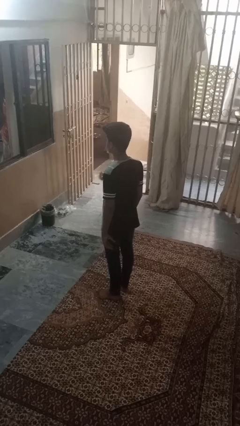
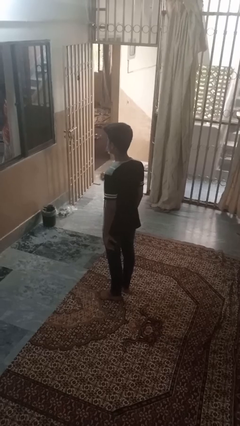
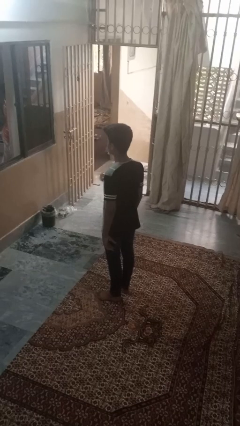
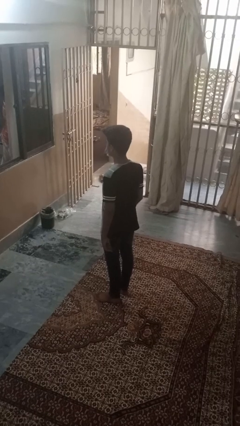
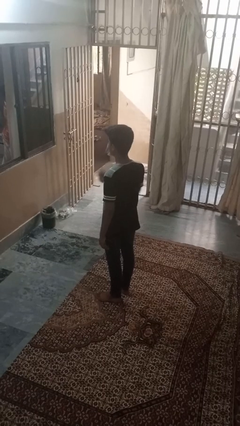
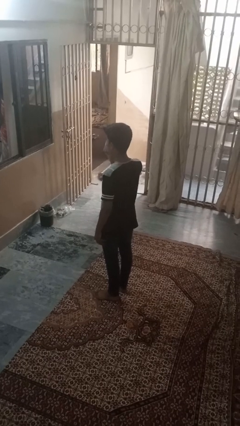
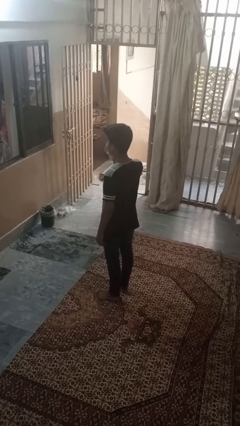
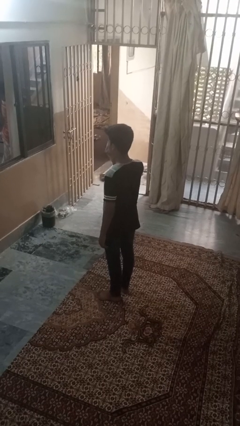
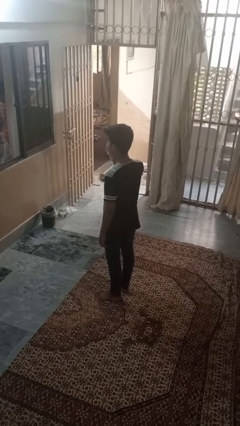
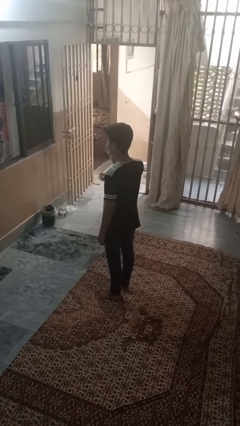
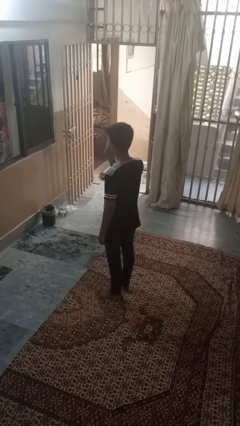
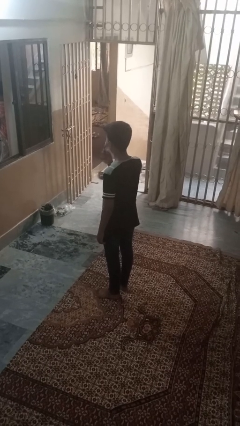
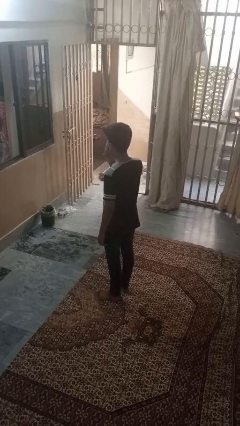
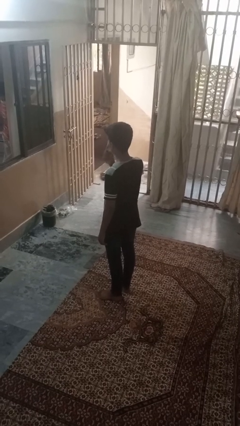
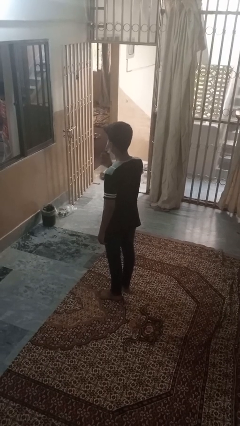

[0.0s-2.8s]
person shades eyes

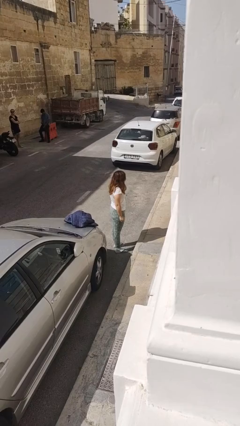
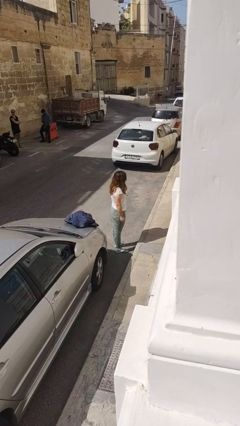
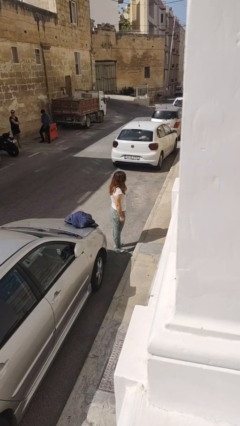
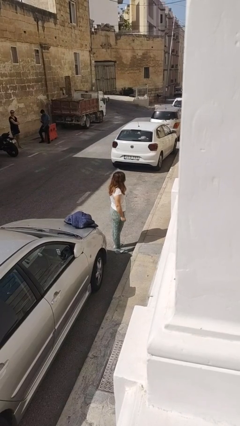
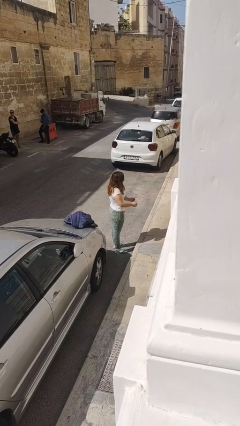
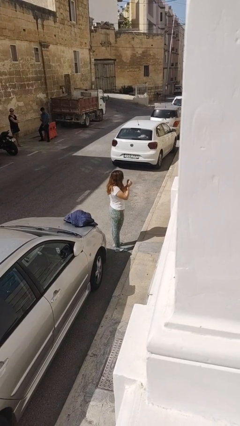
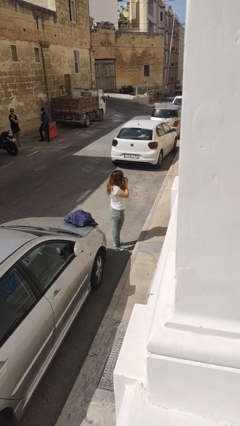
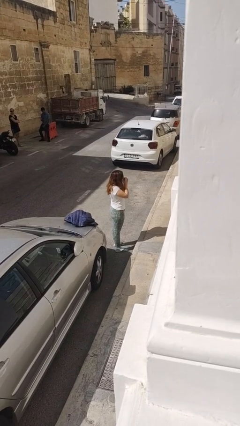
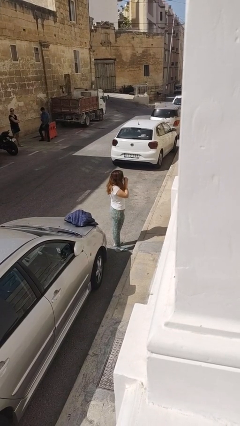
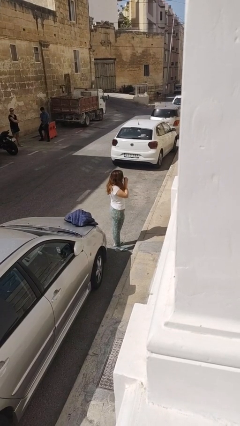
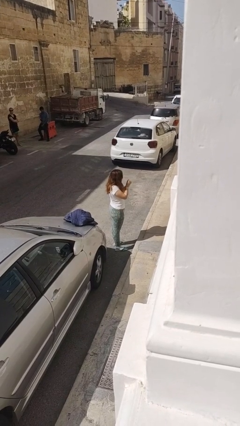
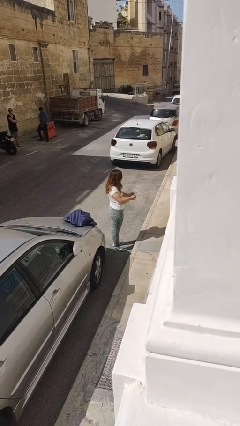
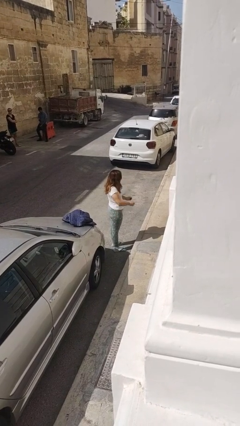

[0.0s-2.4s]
person blows into hands

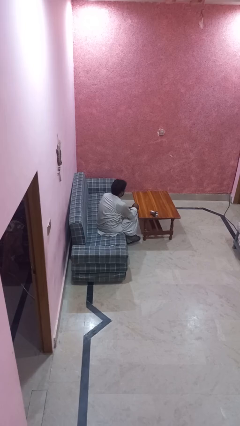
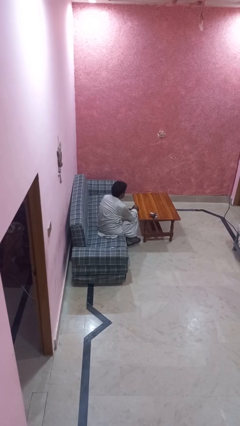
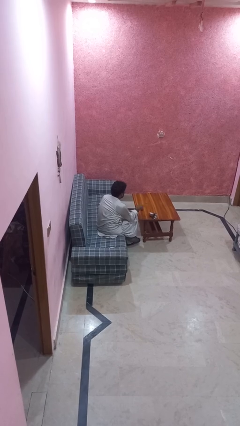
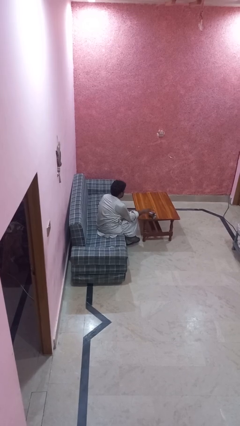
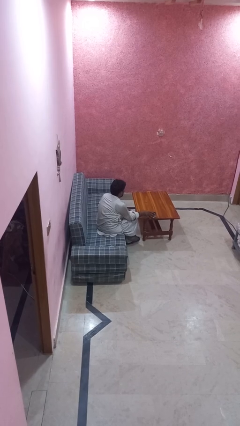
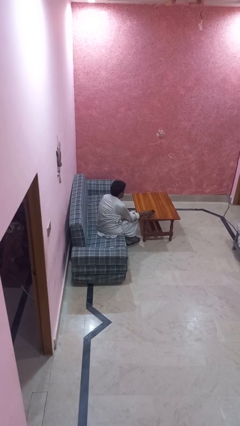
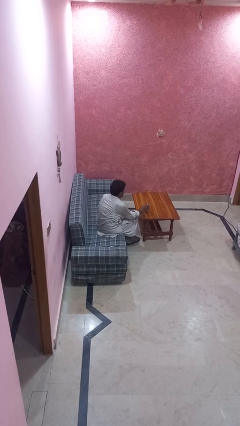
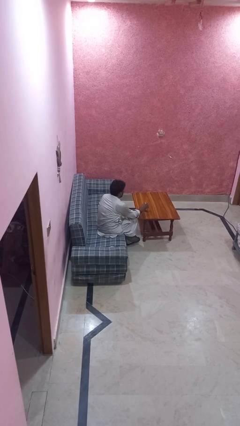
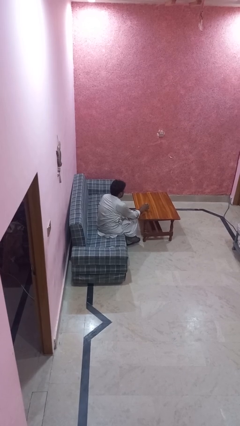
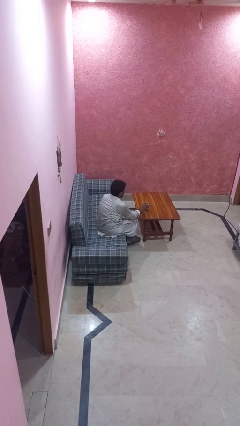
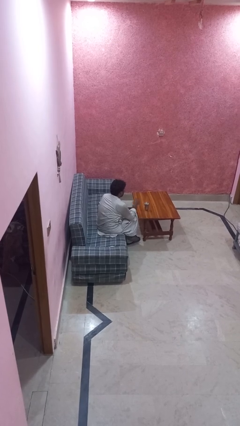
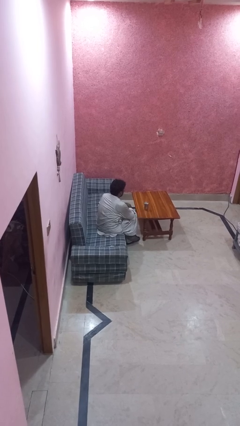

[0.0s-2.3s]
person sets upright glass

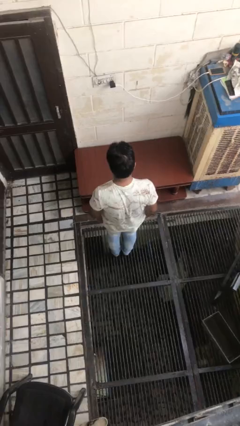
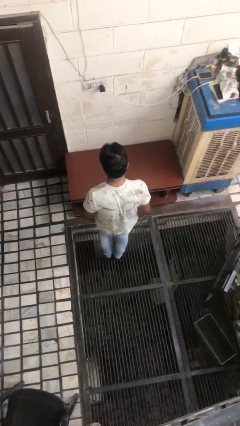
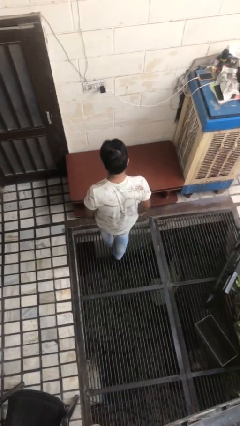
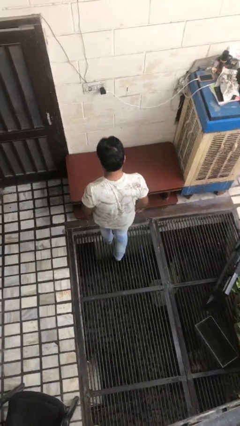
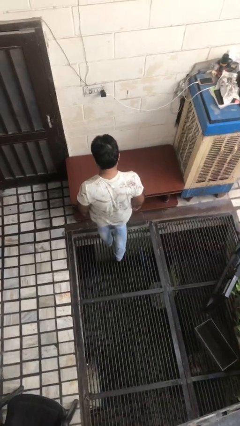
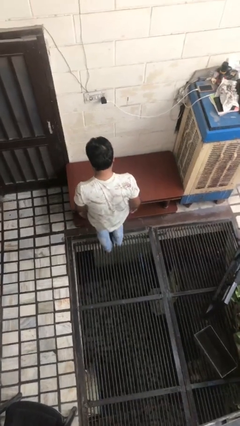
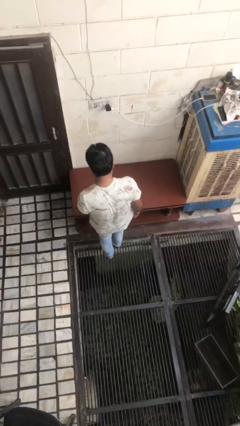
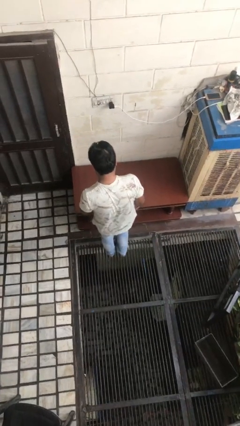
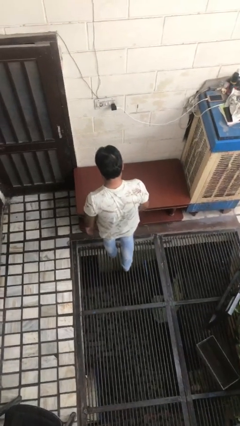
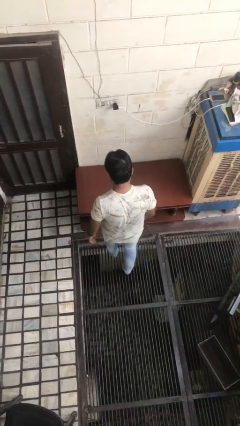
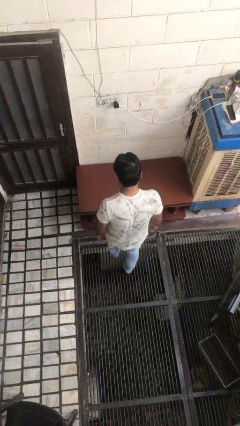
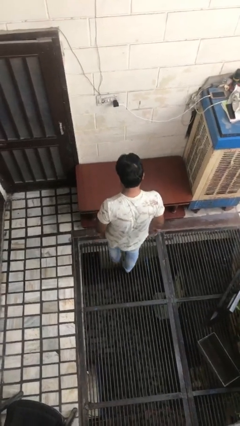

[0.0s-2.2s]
person bumps into table

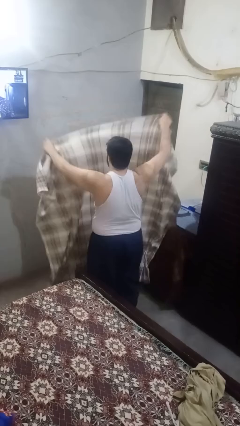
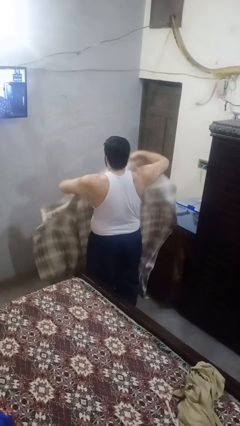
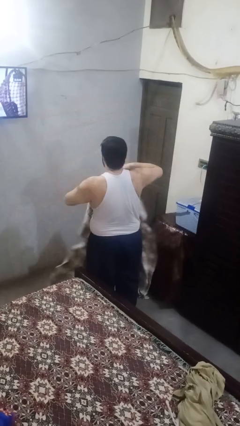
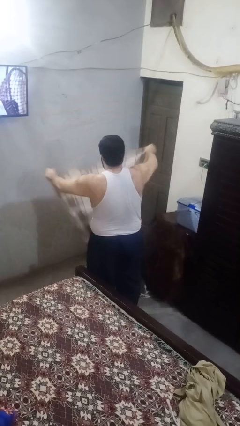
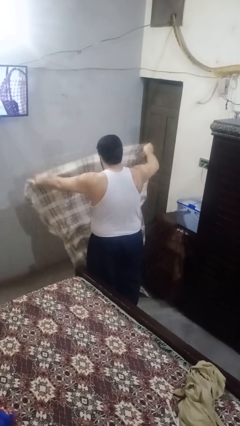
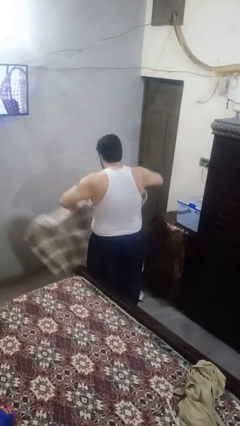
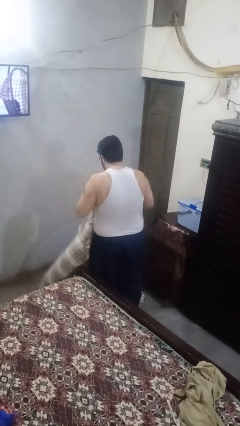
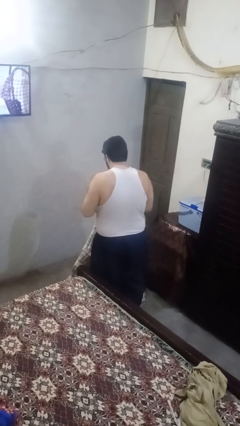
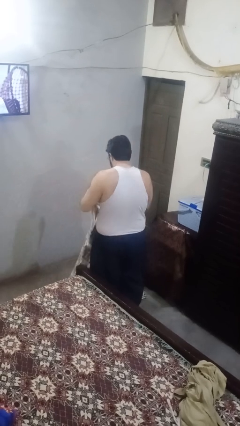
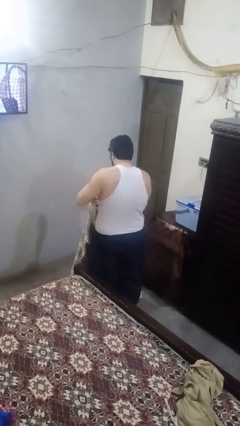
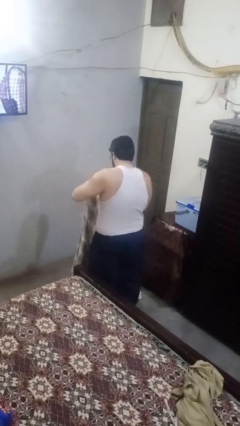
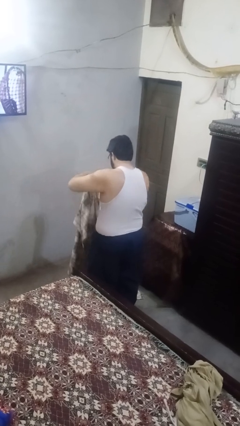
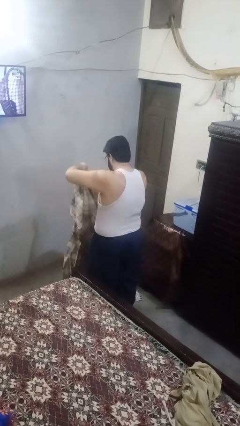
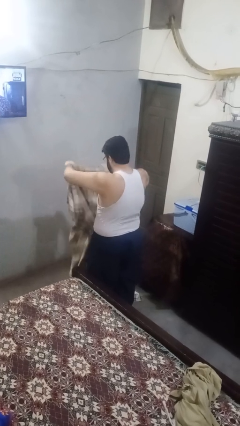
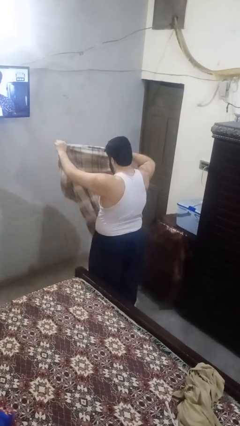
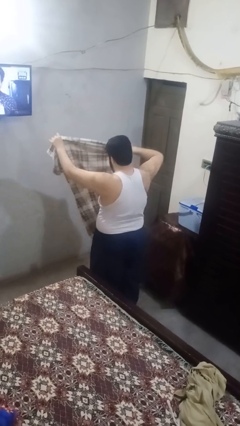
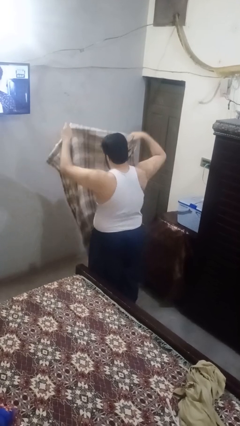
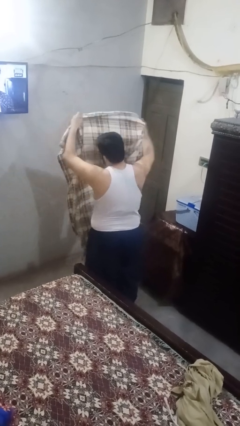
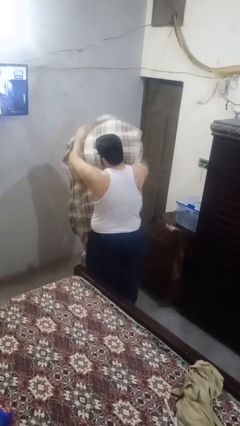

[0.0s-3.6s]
person folds blanket

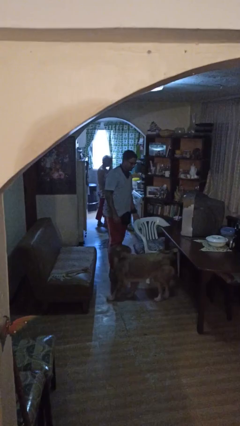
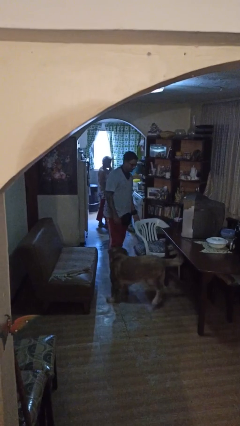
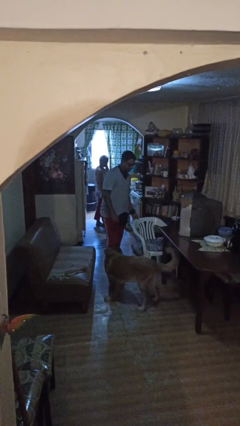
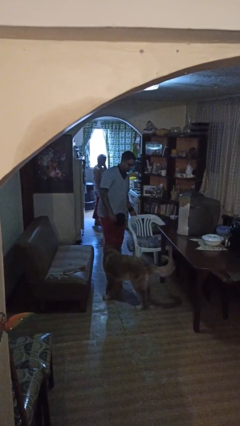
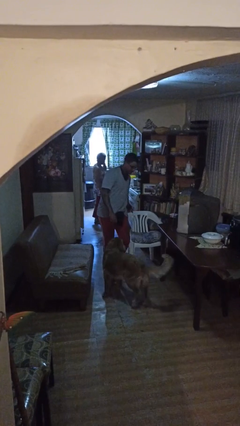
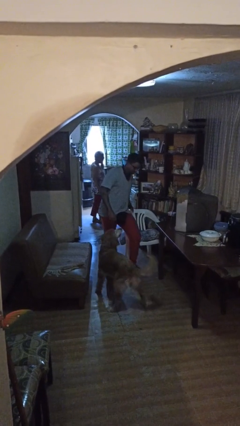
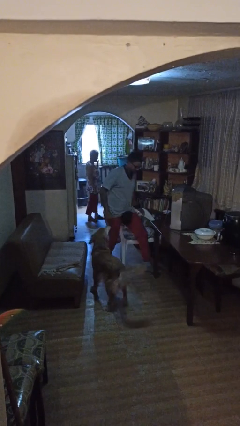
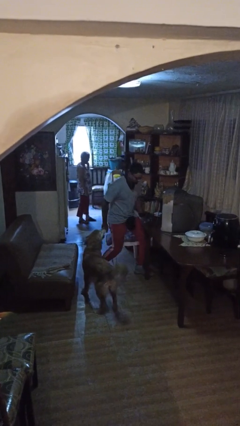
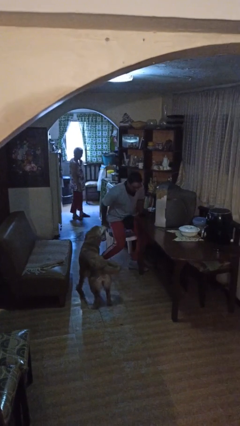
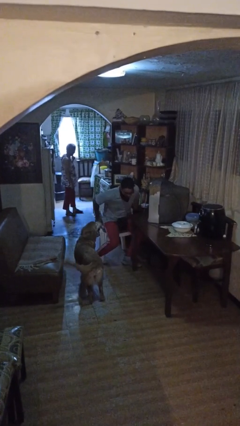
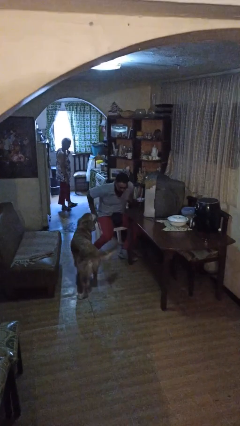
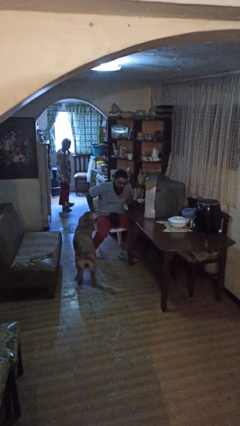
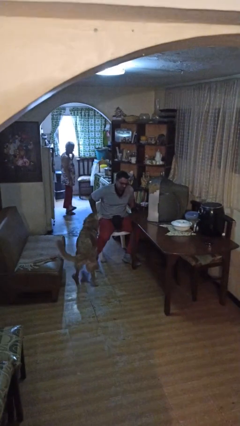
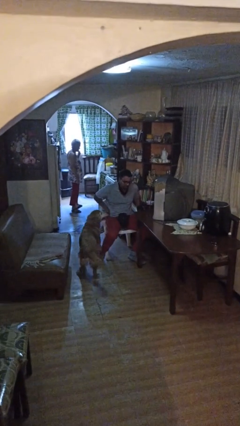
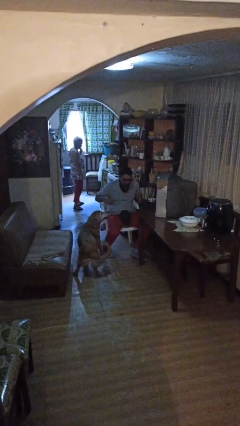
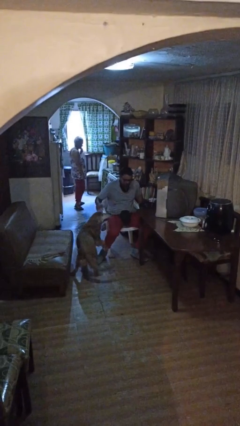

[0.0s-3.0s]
person sits down

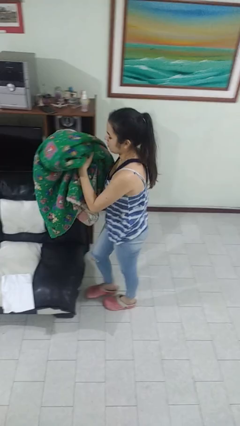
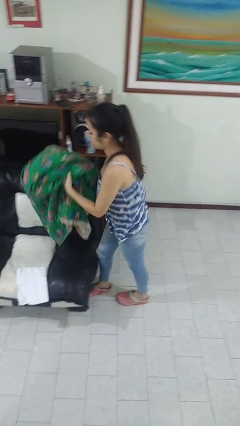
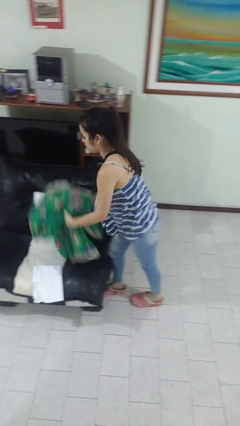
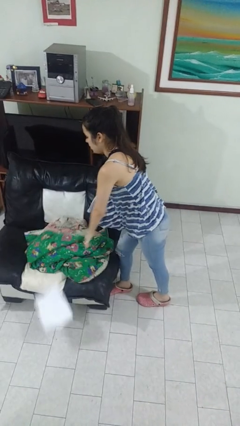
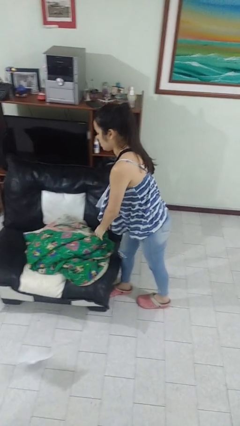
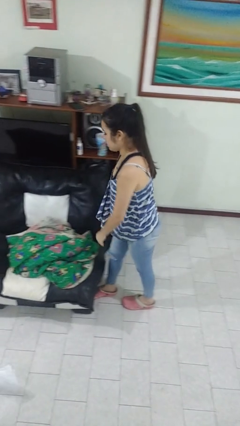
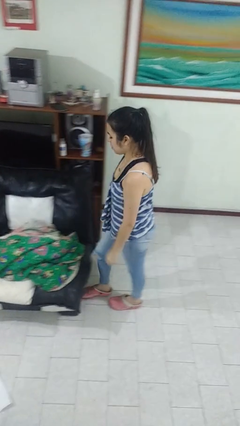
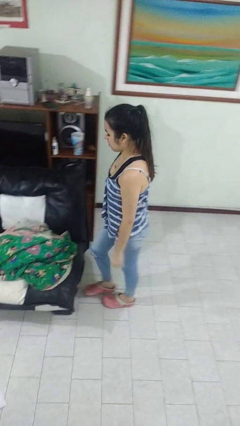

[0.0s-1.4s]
person puts down object on couch
